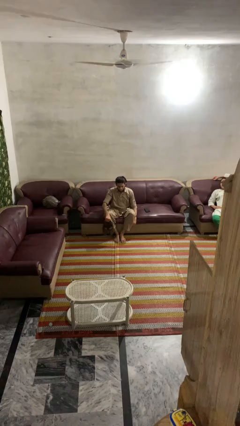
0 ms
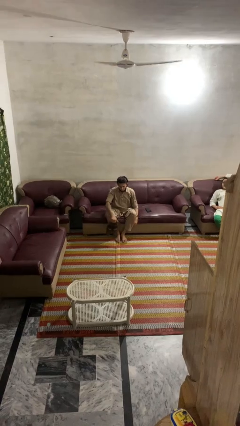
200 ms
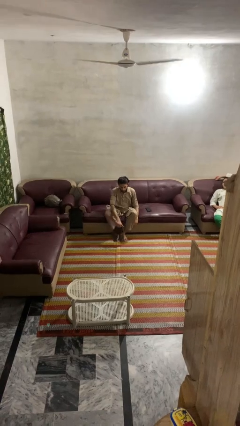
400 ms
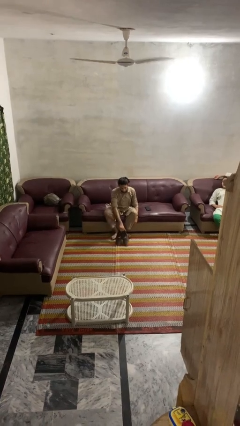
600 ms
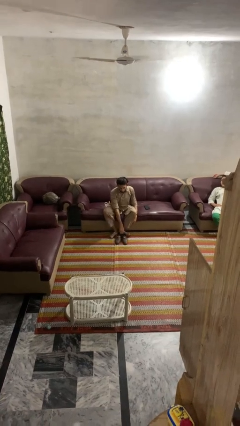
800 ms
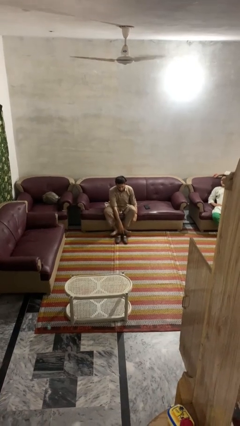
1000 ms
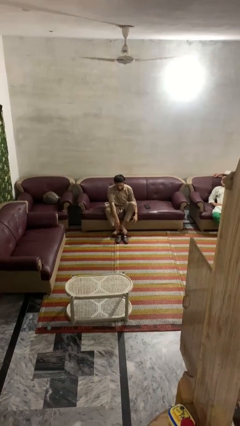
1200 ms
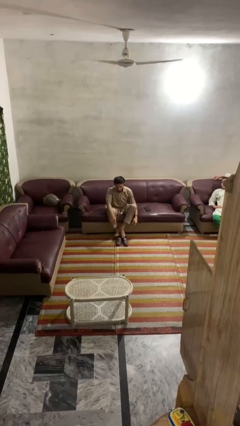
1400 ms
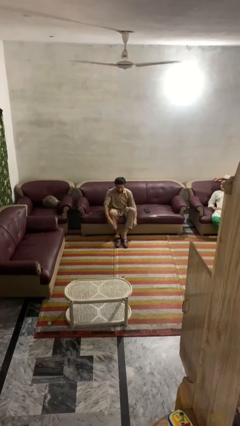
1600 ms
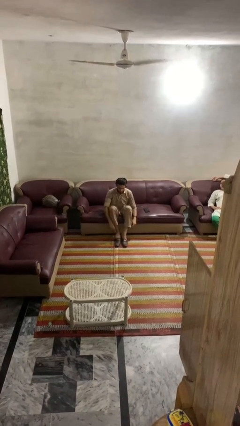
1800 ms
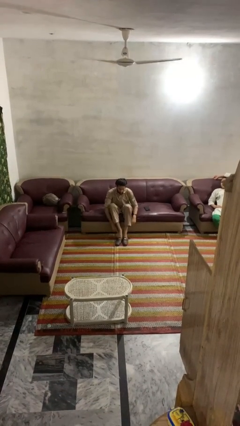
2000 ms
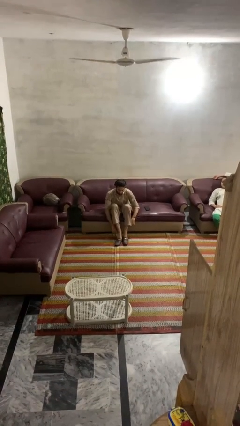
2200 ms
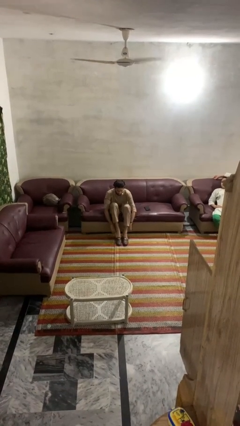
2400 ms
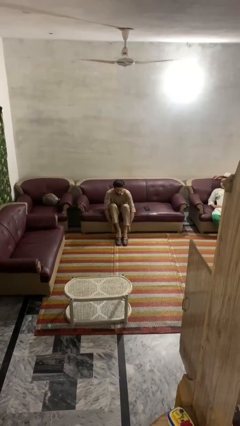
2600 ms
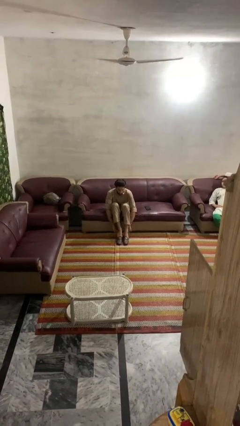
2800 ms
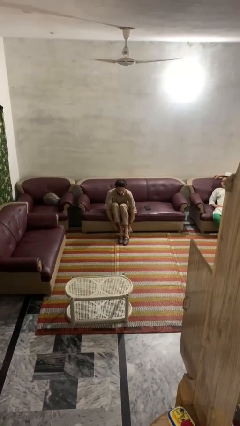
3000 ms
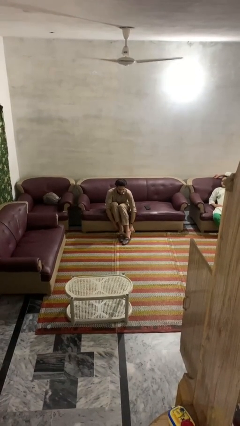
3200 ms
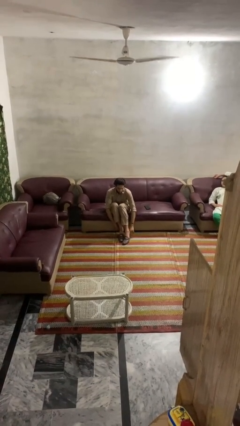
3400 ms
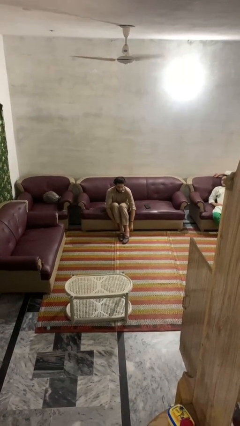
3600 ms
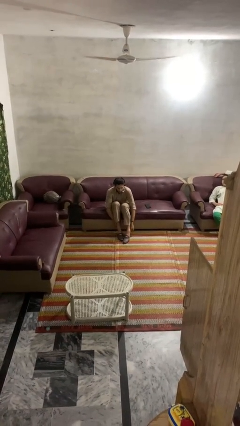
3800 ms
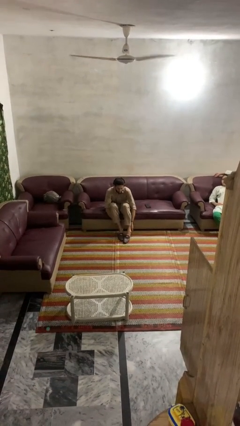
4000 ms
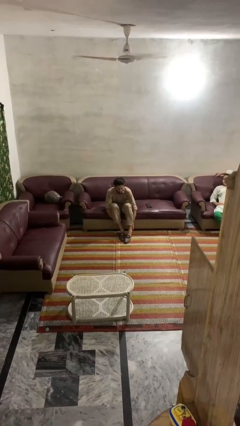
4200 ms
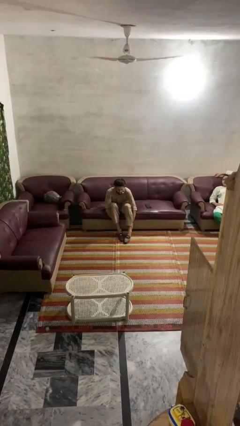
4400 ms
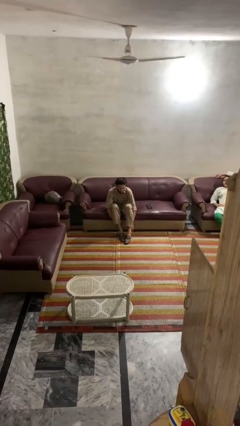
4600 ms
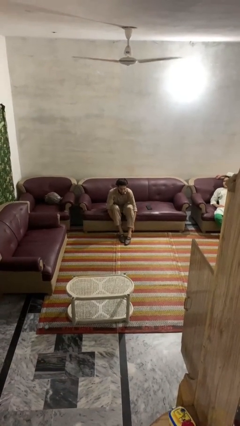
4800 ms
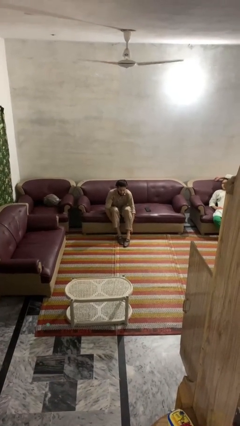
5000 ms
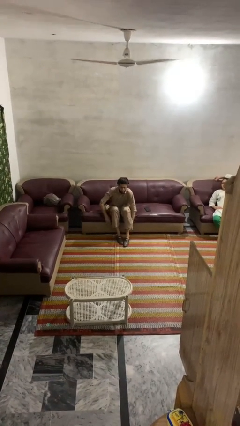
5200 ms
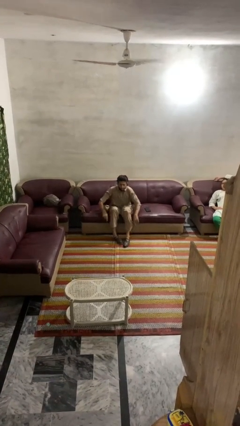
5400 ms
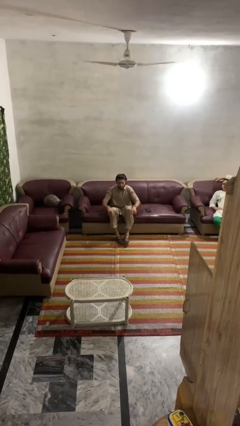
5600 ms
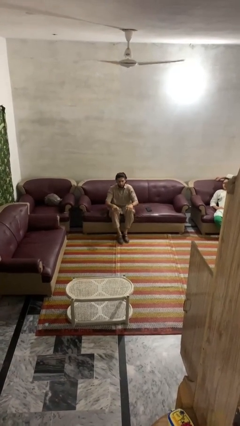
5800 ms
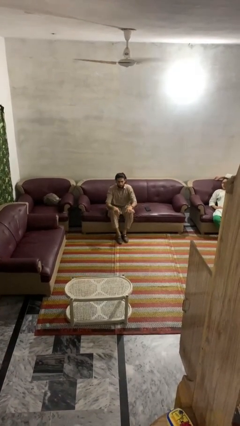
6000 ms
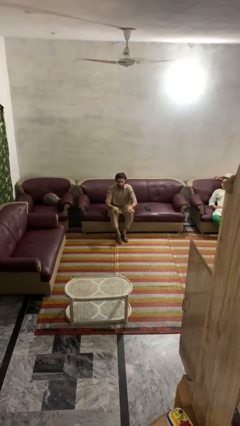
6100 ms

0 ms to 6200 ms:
person puts on shoes

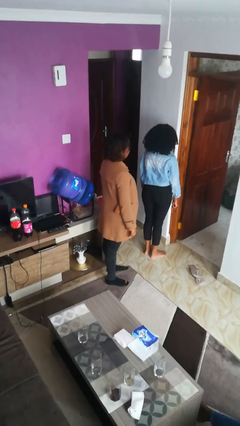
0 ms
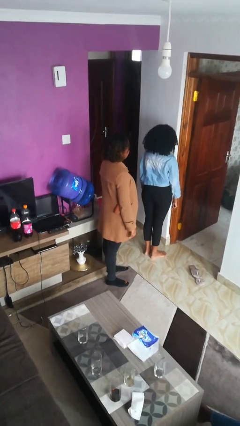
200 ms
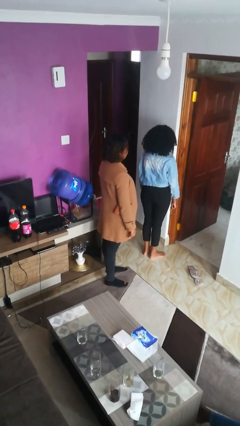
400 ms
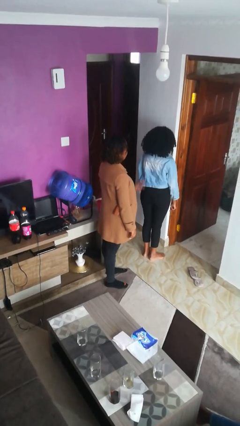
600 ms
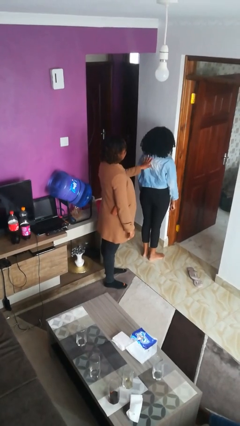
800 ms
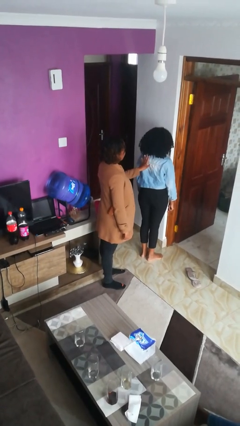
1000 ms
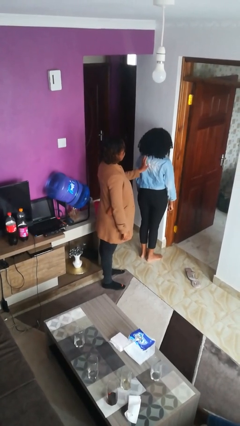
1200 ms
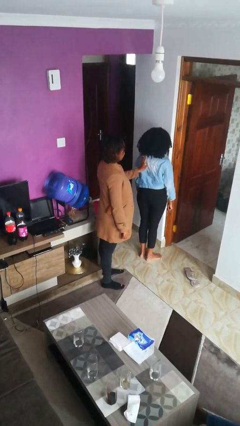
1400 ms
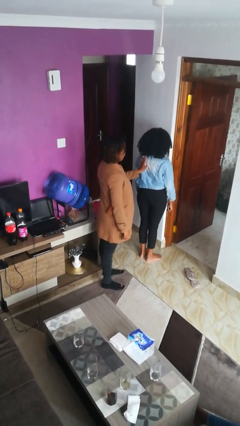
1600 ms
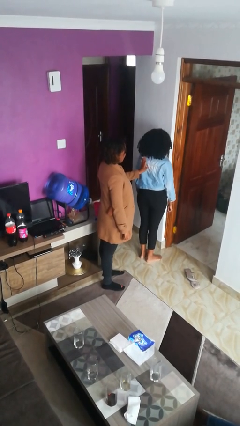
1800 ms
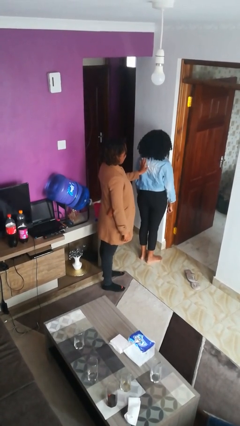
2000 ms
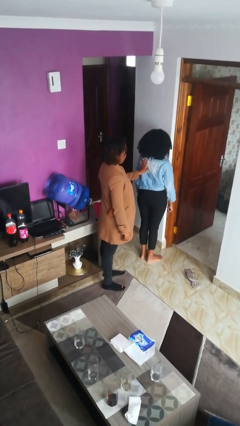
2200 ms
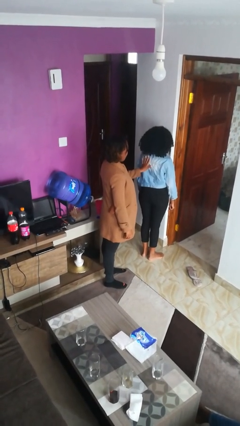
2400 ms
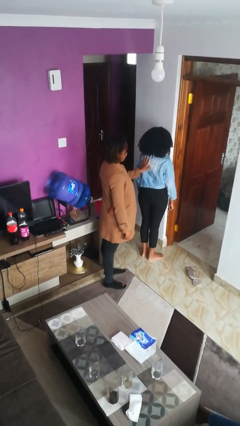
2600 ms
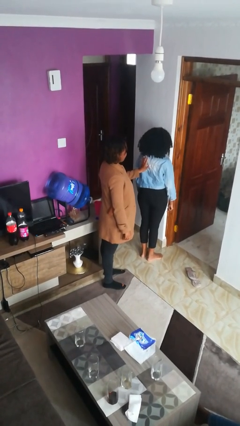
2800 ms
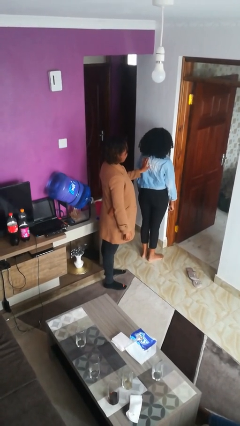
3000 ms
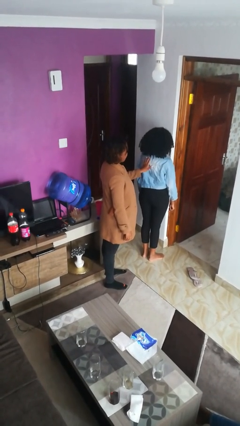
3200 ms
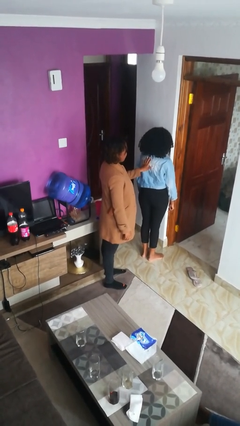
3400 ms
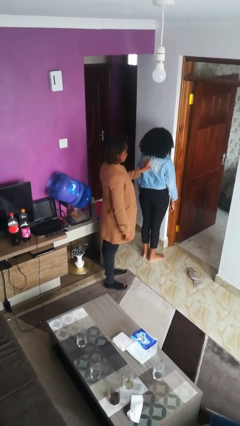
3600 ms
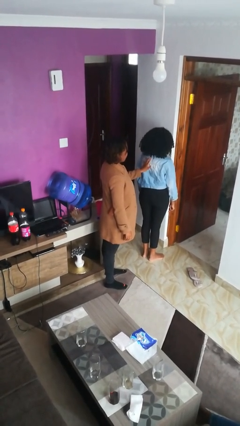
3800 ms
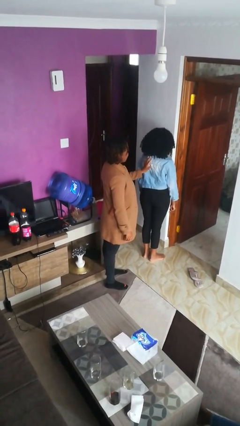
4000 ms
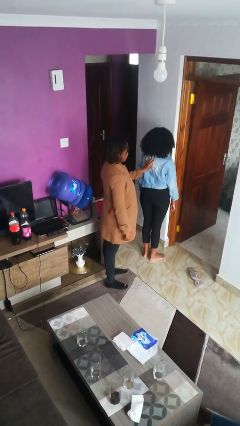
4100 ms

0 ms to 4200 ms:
person touches back of person

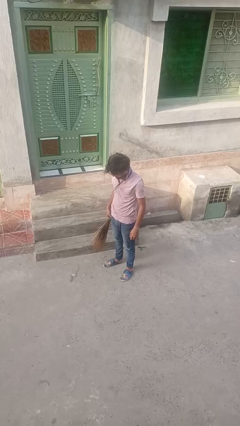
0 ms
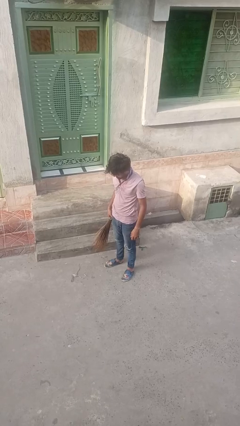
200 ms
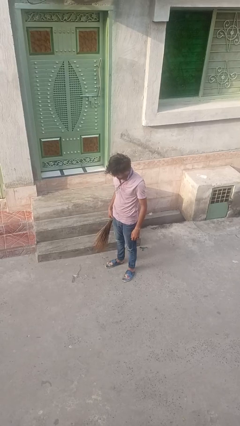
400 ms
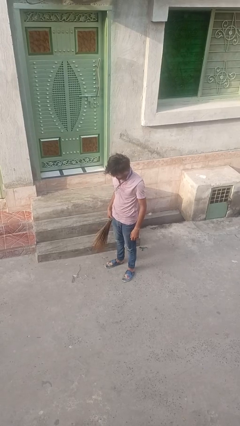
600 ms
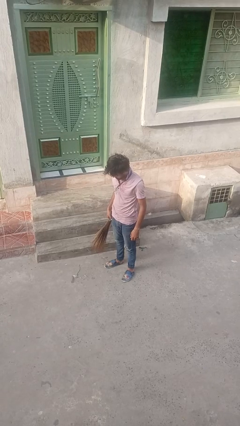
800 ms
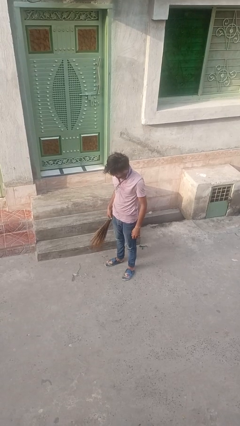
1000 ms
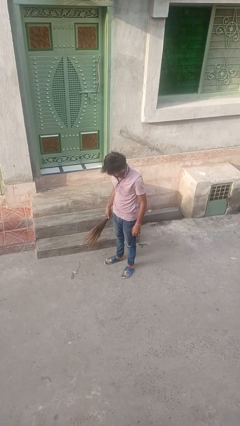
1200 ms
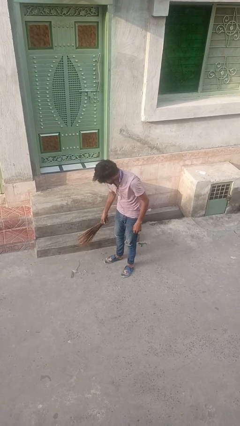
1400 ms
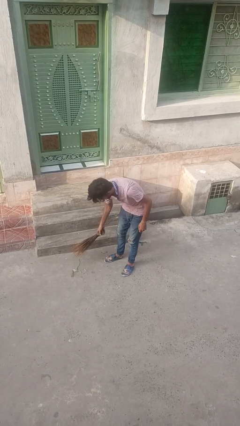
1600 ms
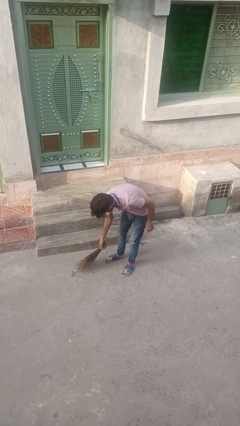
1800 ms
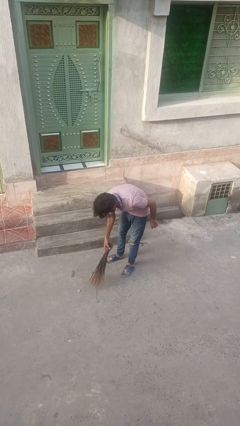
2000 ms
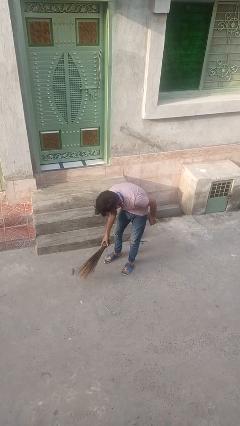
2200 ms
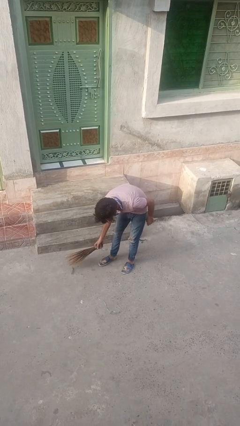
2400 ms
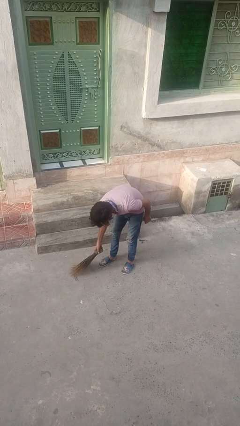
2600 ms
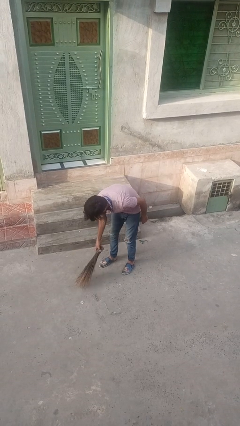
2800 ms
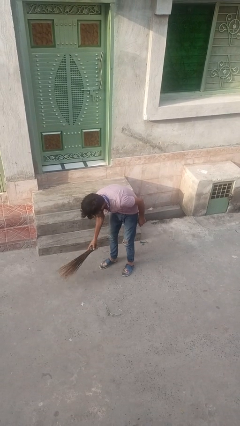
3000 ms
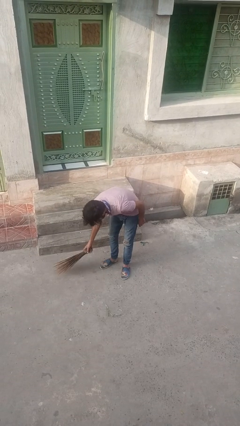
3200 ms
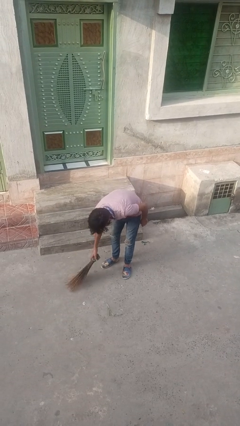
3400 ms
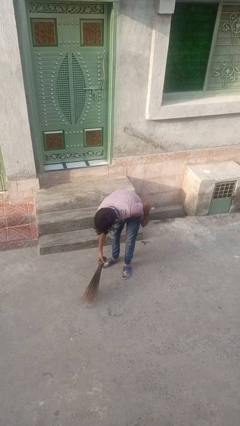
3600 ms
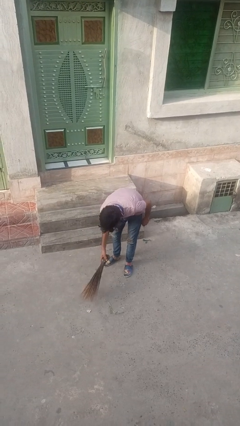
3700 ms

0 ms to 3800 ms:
person sweeps floor

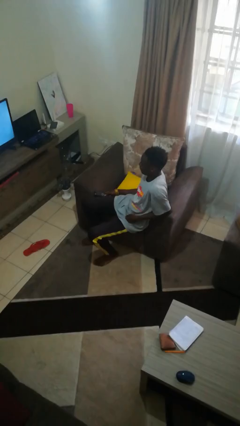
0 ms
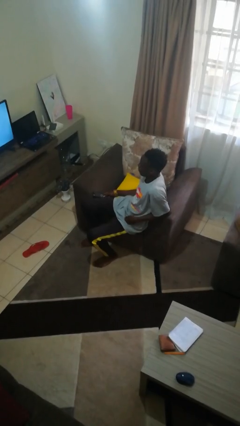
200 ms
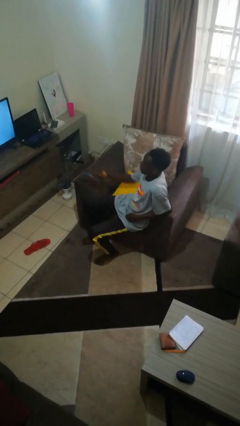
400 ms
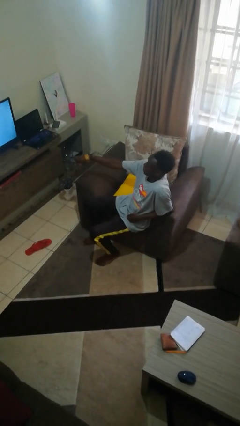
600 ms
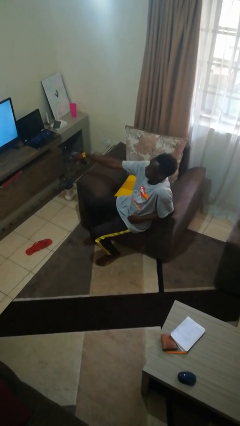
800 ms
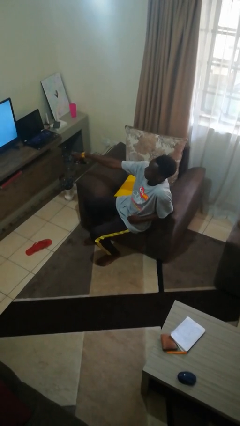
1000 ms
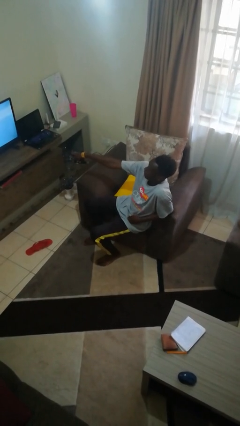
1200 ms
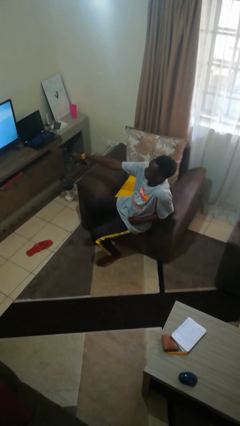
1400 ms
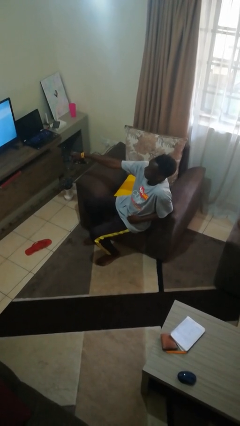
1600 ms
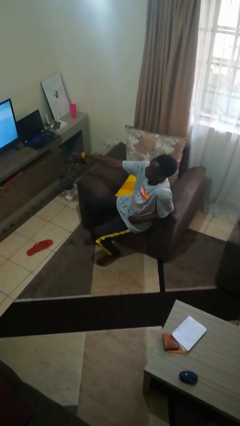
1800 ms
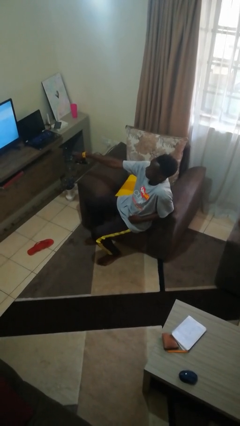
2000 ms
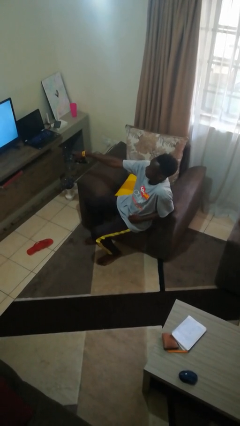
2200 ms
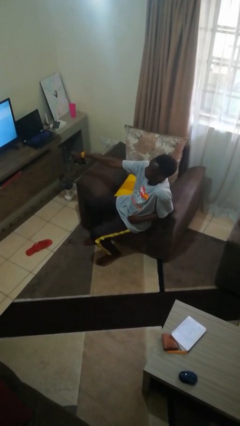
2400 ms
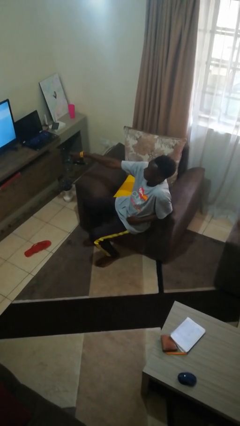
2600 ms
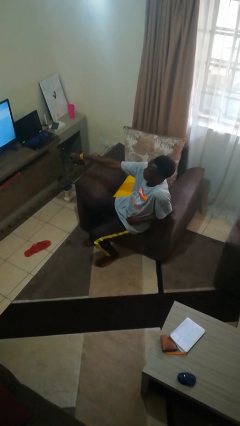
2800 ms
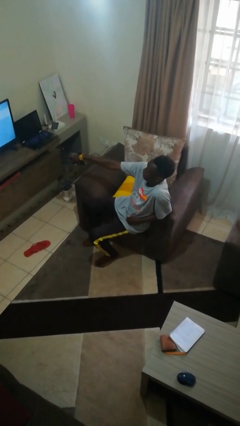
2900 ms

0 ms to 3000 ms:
person uses television remote

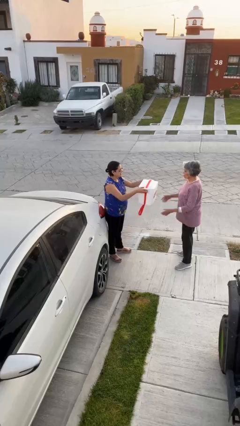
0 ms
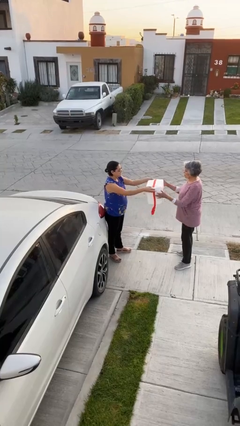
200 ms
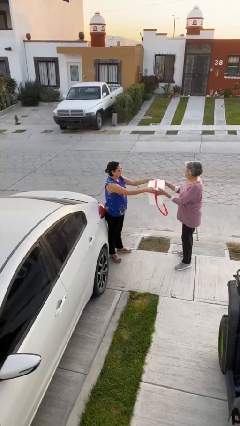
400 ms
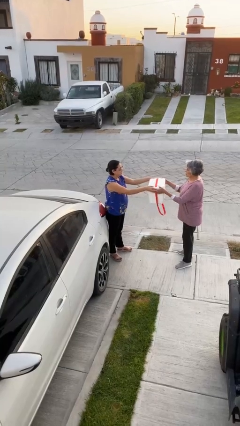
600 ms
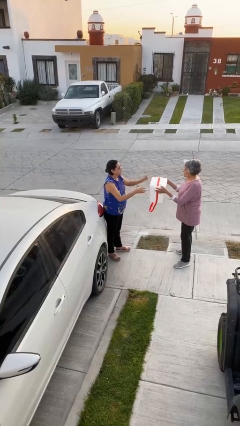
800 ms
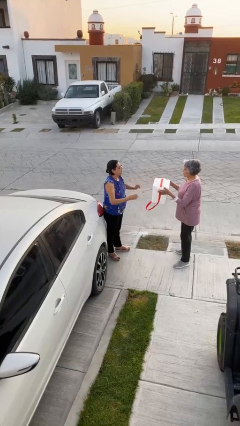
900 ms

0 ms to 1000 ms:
person transfers object to person
